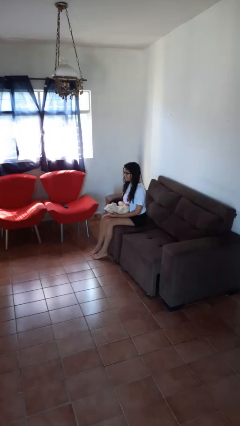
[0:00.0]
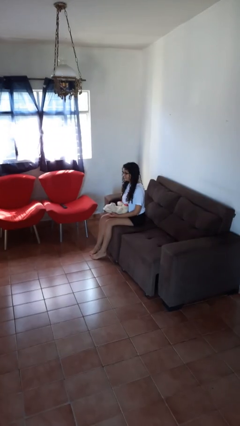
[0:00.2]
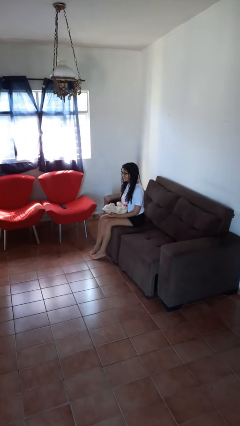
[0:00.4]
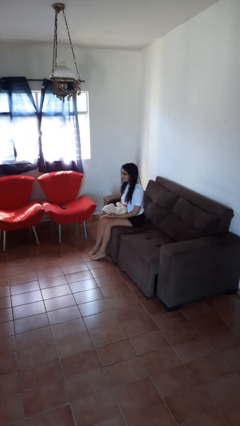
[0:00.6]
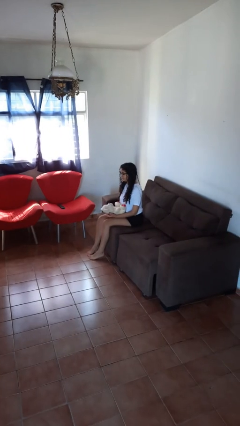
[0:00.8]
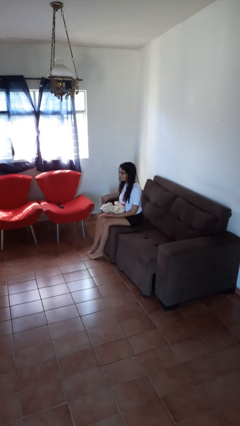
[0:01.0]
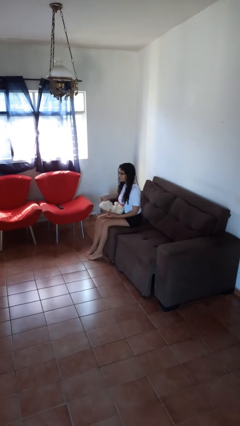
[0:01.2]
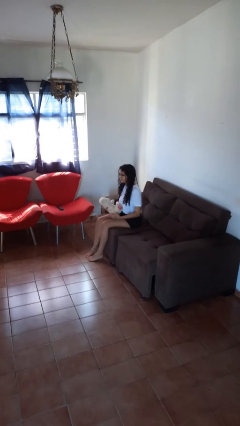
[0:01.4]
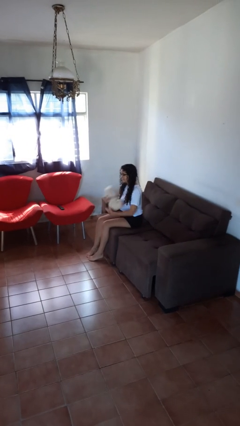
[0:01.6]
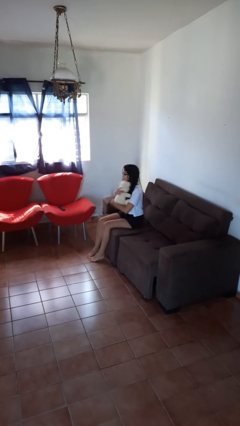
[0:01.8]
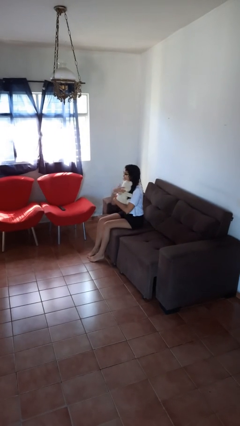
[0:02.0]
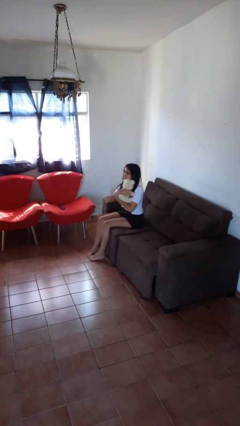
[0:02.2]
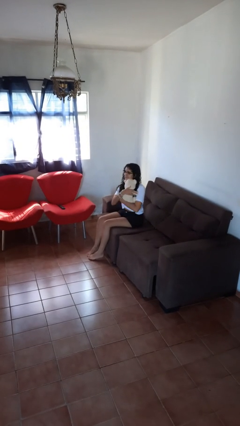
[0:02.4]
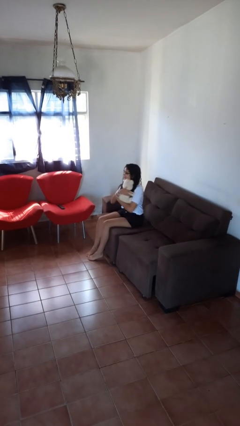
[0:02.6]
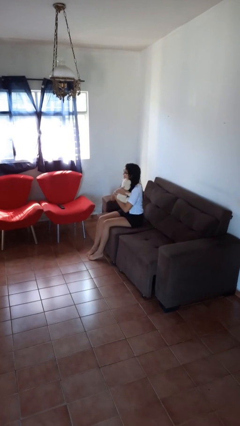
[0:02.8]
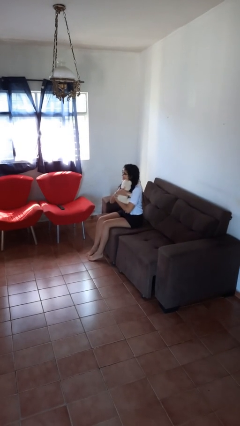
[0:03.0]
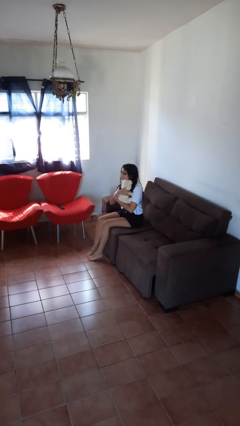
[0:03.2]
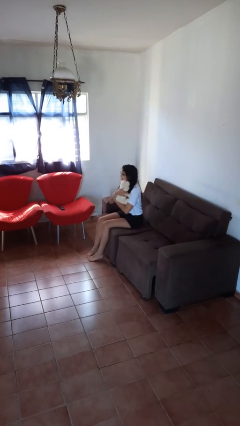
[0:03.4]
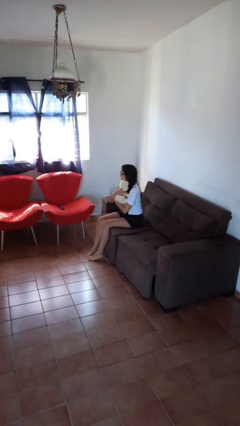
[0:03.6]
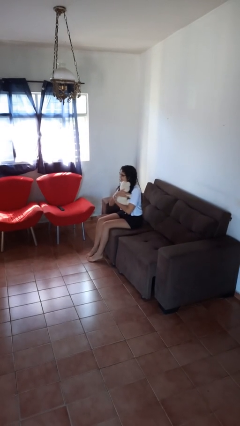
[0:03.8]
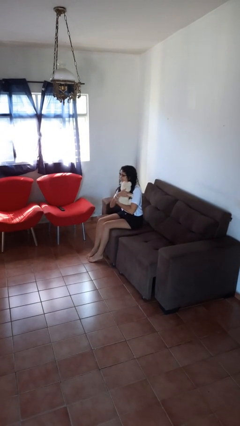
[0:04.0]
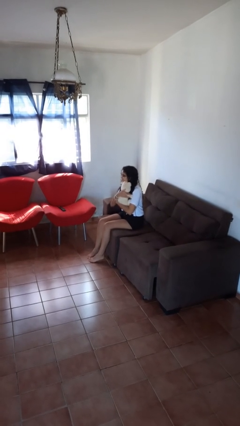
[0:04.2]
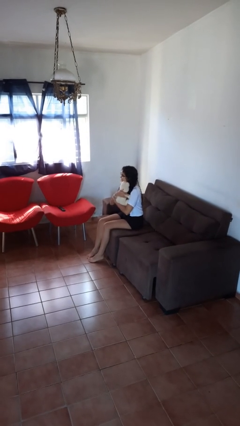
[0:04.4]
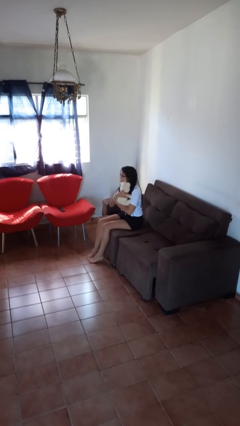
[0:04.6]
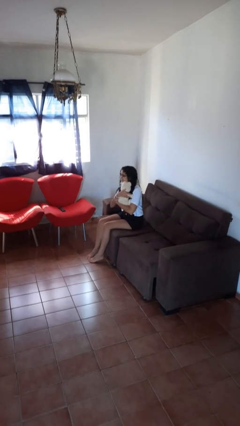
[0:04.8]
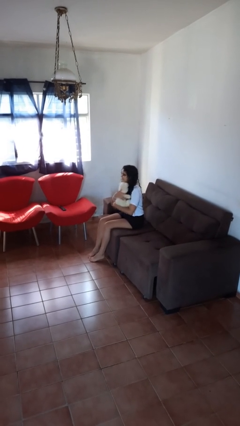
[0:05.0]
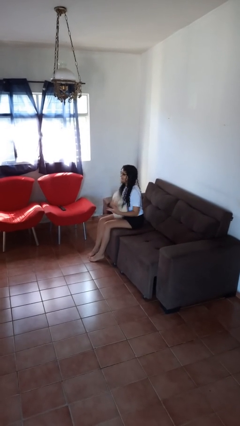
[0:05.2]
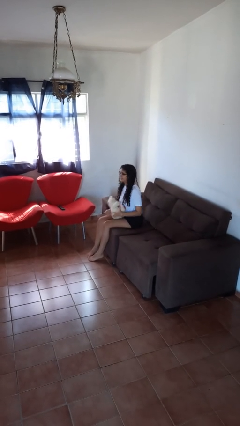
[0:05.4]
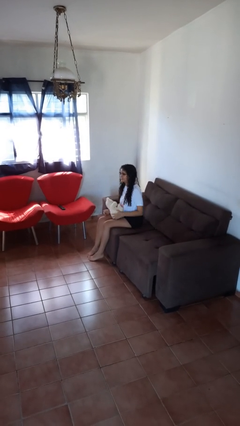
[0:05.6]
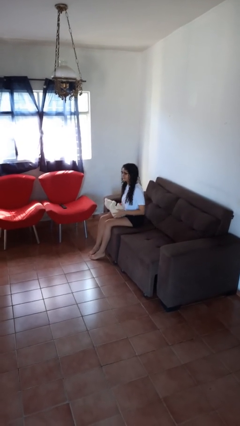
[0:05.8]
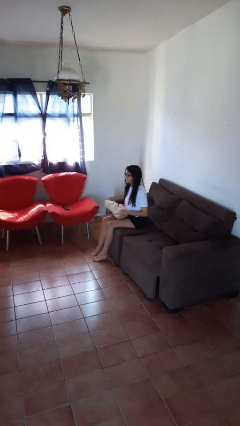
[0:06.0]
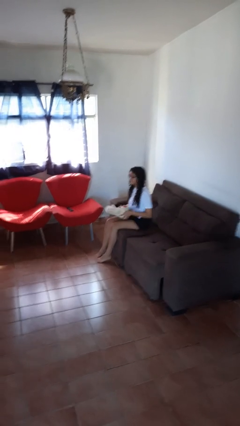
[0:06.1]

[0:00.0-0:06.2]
person hugs stuffed animal

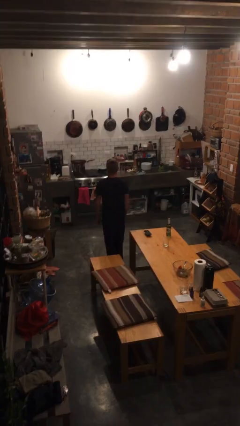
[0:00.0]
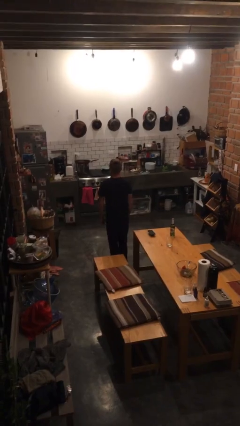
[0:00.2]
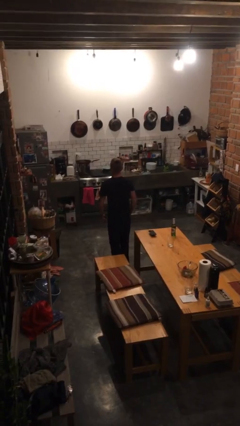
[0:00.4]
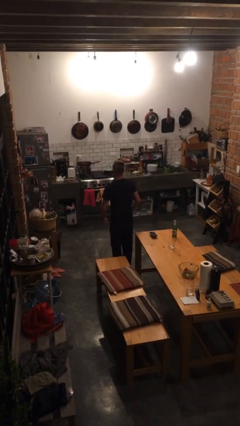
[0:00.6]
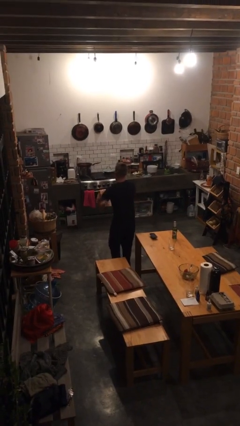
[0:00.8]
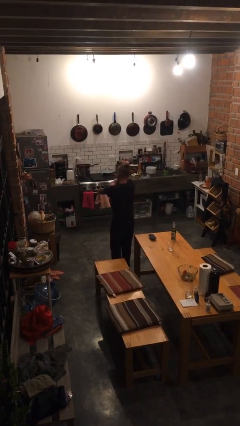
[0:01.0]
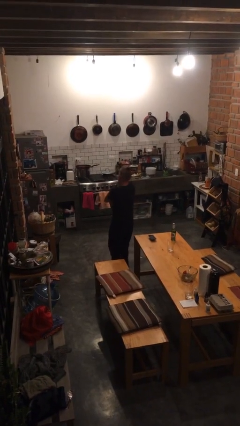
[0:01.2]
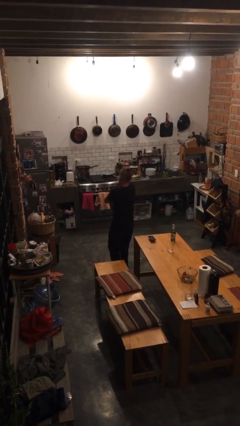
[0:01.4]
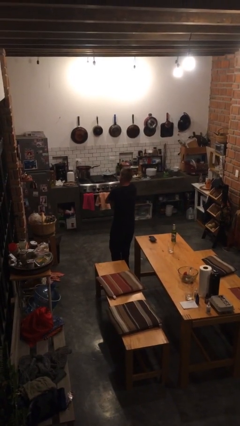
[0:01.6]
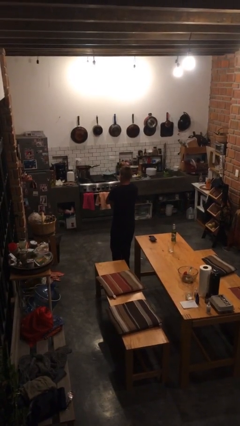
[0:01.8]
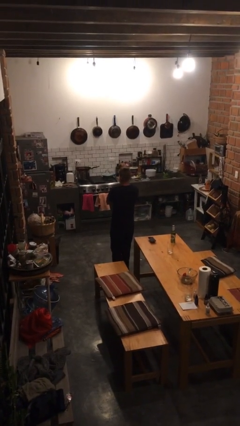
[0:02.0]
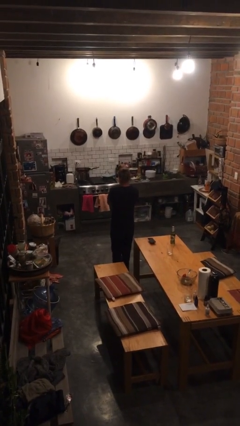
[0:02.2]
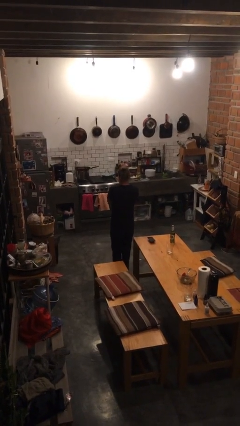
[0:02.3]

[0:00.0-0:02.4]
person gestures arms x

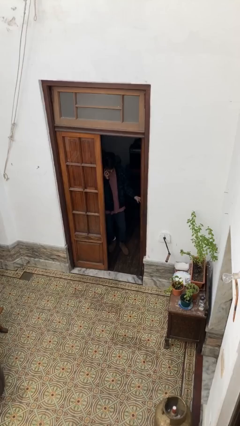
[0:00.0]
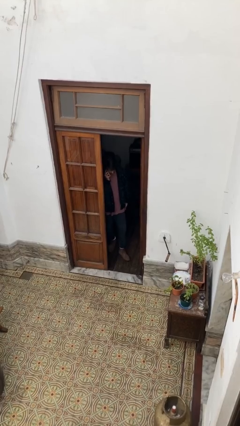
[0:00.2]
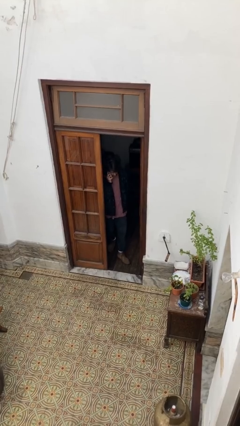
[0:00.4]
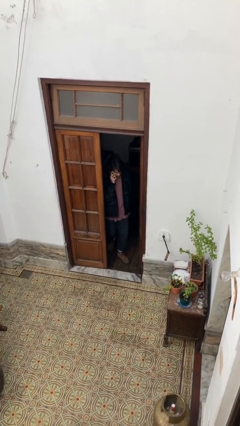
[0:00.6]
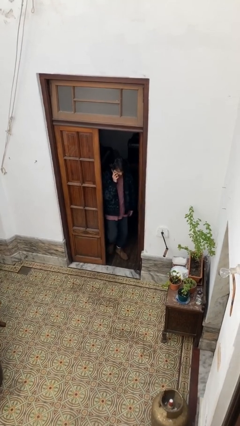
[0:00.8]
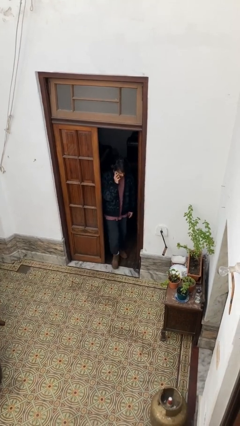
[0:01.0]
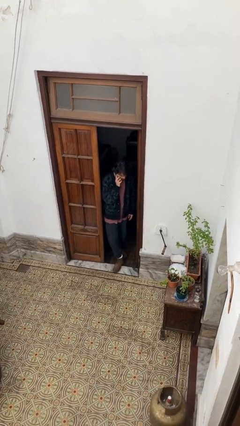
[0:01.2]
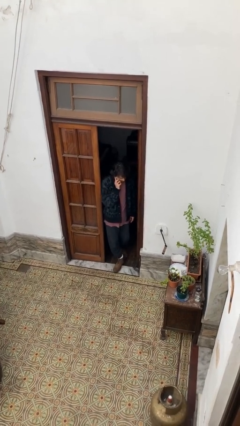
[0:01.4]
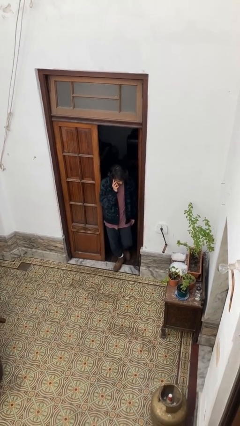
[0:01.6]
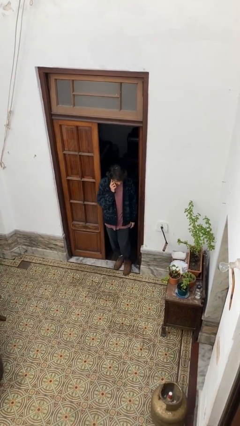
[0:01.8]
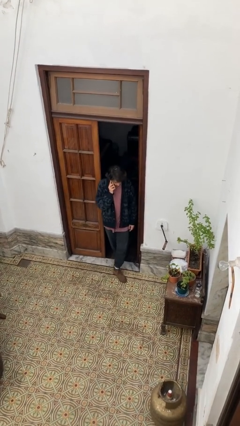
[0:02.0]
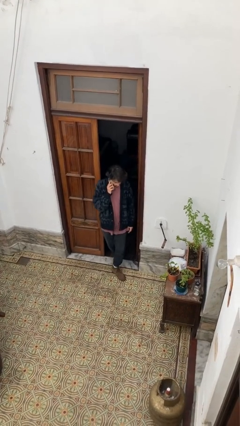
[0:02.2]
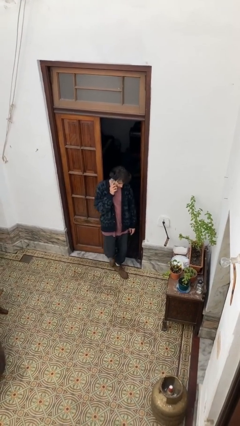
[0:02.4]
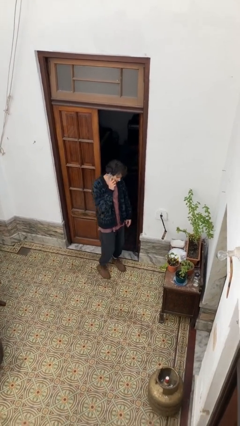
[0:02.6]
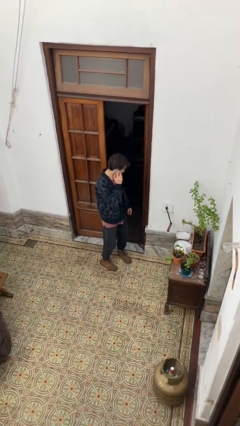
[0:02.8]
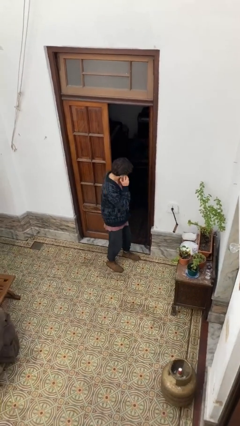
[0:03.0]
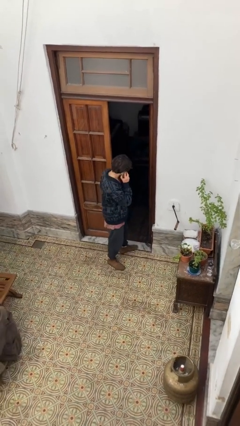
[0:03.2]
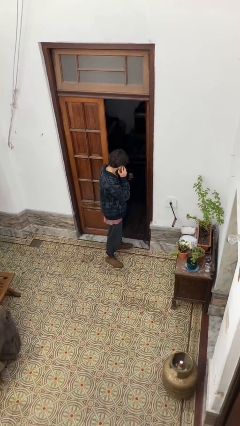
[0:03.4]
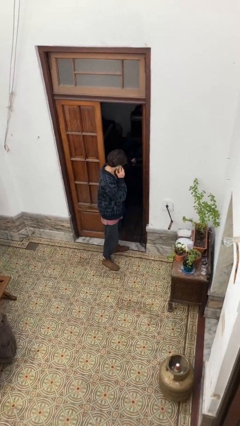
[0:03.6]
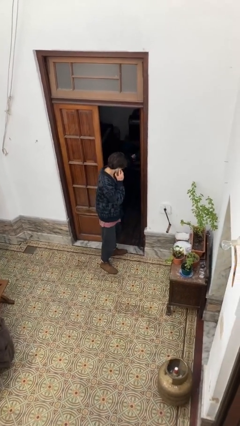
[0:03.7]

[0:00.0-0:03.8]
person enters scene through structure

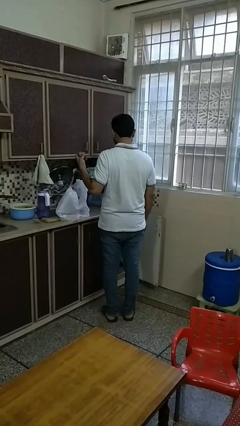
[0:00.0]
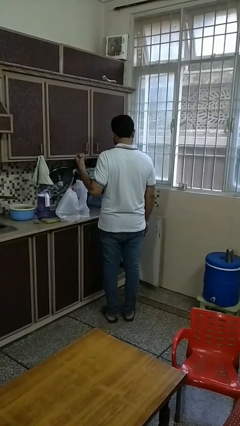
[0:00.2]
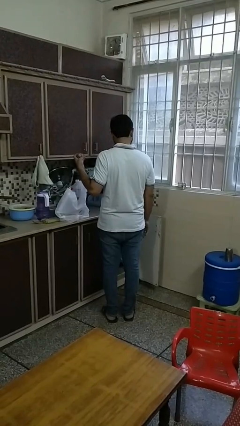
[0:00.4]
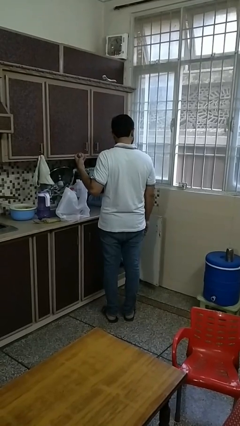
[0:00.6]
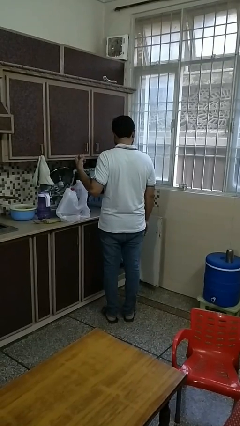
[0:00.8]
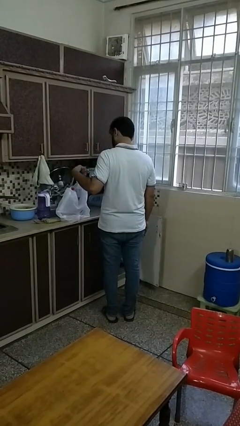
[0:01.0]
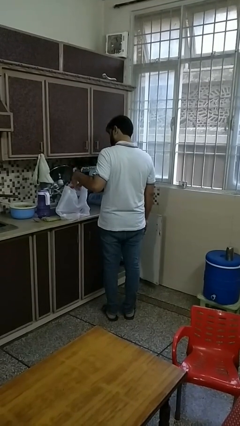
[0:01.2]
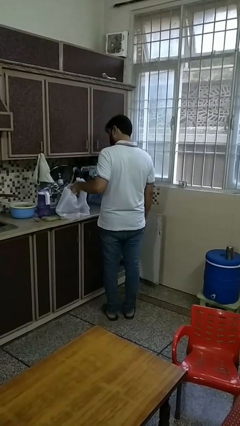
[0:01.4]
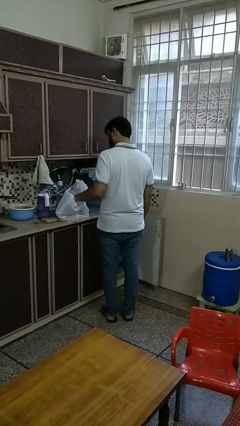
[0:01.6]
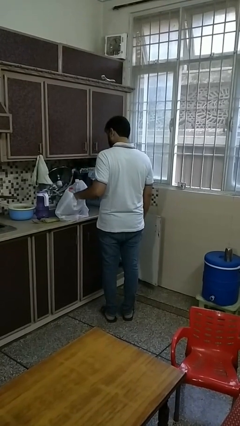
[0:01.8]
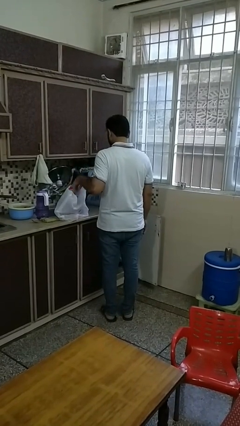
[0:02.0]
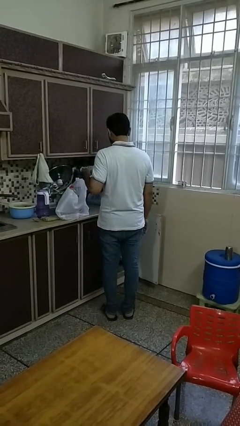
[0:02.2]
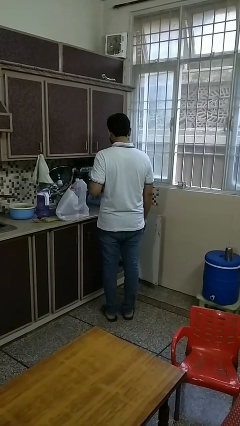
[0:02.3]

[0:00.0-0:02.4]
person puts object into bag

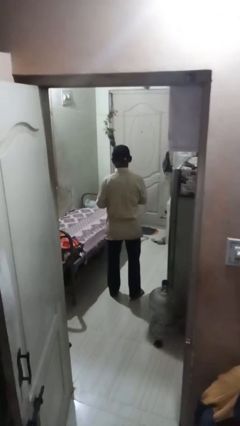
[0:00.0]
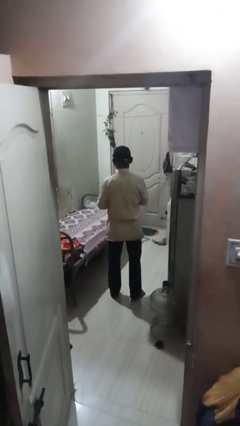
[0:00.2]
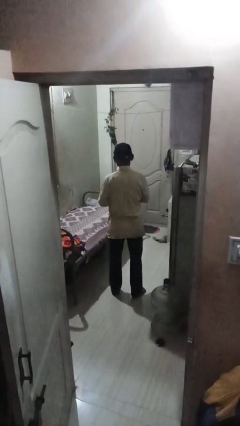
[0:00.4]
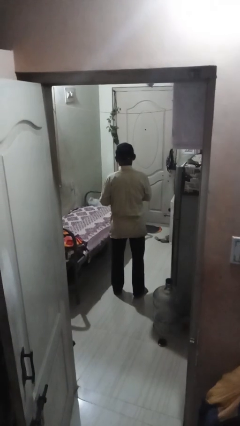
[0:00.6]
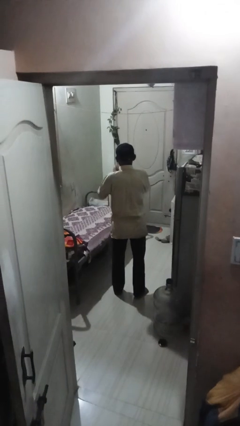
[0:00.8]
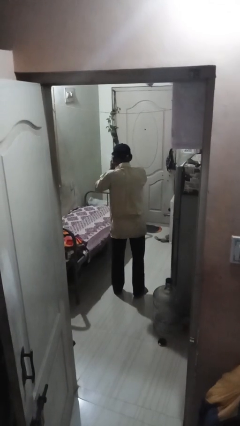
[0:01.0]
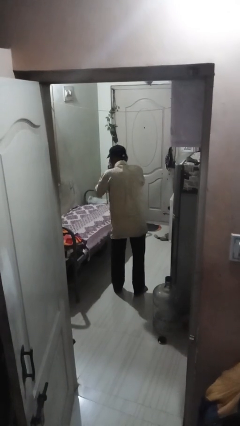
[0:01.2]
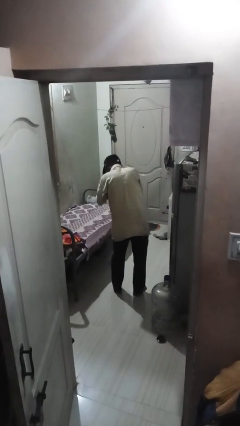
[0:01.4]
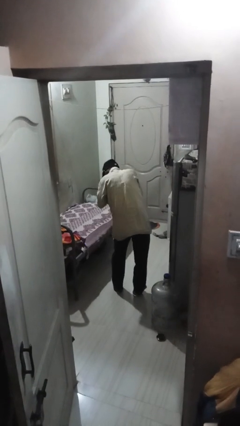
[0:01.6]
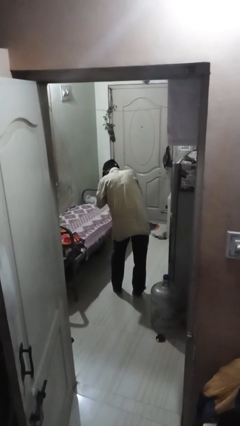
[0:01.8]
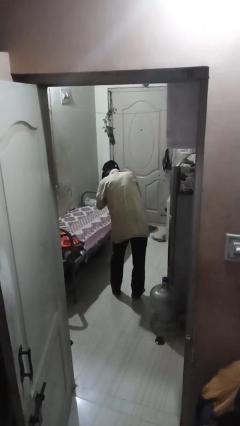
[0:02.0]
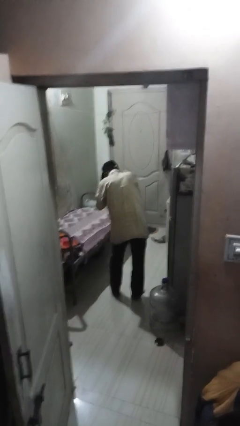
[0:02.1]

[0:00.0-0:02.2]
person sneezes into hand

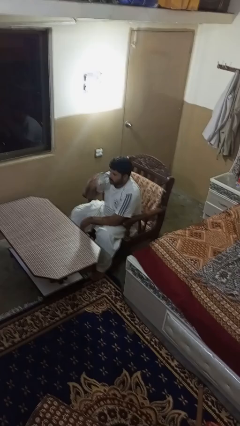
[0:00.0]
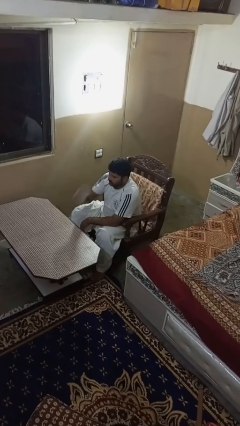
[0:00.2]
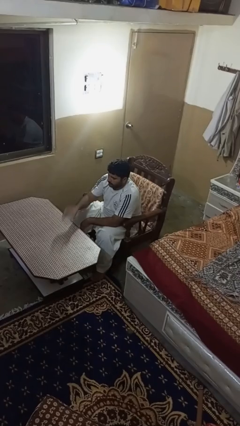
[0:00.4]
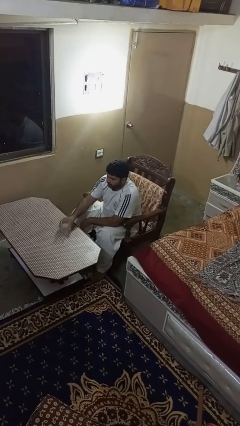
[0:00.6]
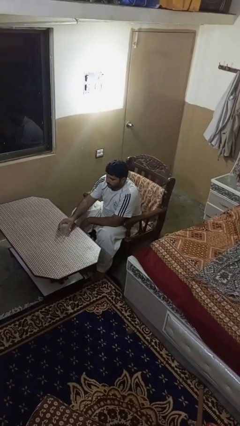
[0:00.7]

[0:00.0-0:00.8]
person puts down object on table
